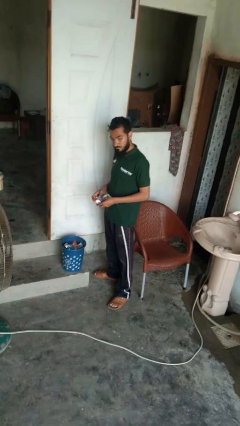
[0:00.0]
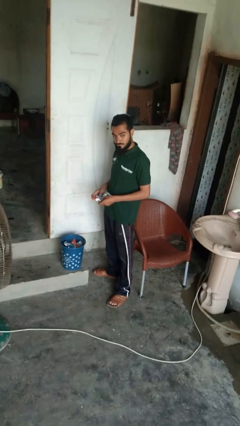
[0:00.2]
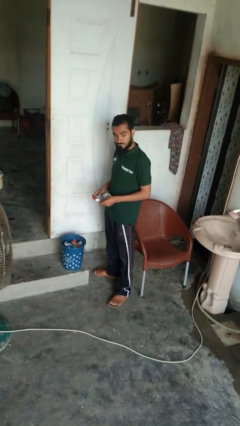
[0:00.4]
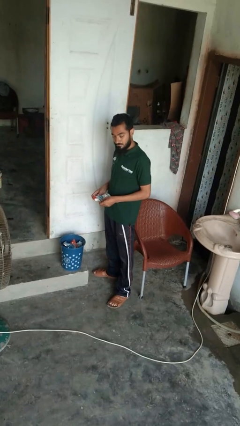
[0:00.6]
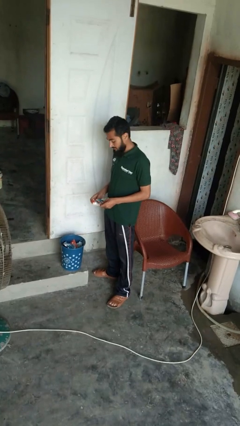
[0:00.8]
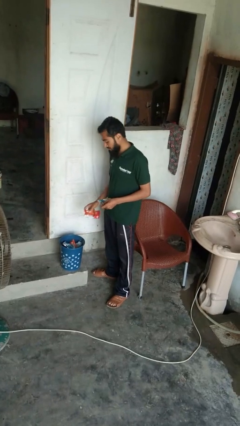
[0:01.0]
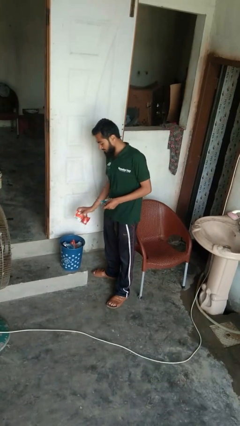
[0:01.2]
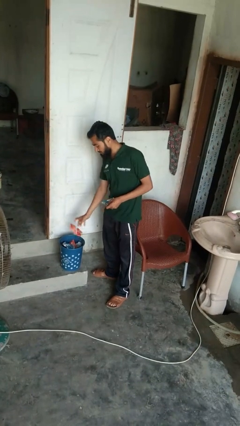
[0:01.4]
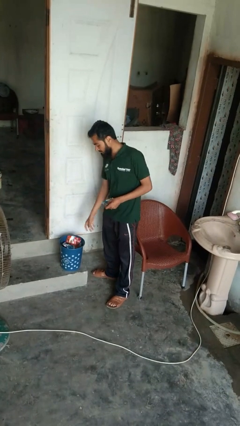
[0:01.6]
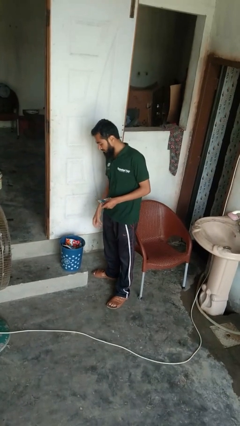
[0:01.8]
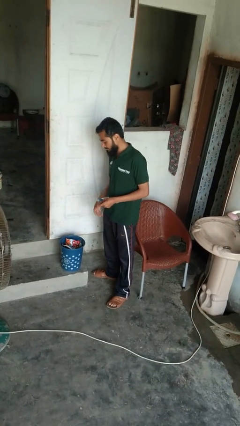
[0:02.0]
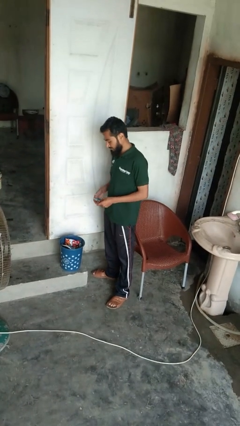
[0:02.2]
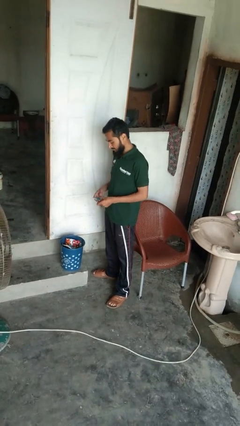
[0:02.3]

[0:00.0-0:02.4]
person discards trash

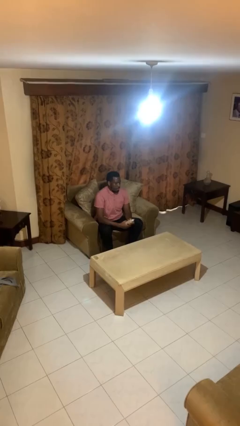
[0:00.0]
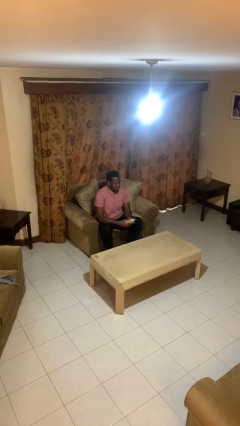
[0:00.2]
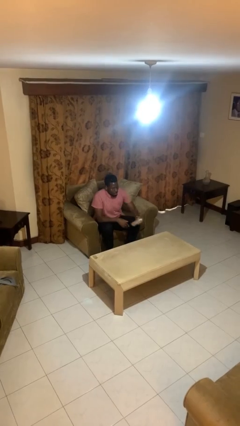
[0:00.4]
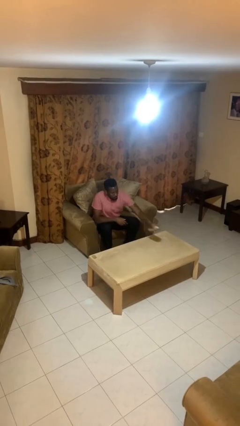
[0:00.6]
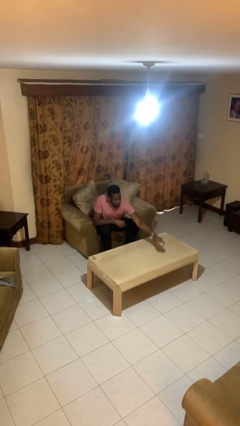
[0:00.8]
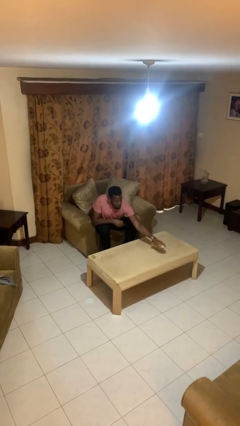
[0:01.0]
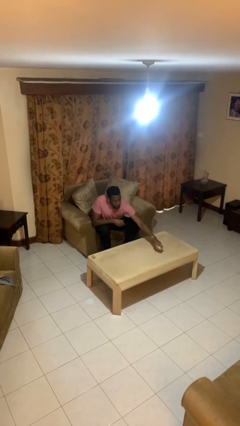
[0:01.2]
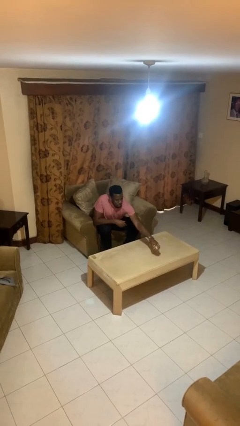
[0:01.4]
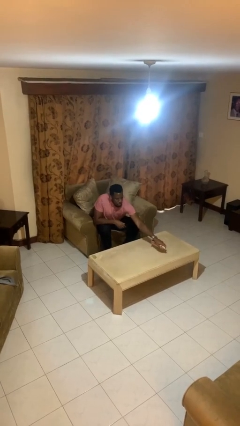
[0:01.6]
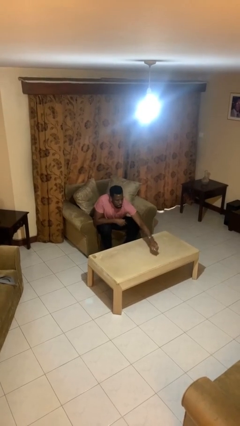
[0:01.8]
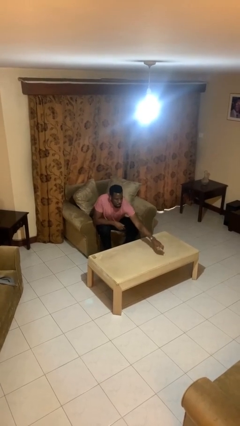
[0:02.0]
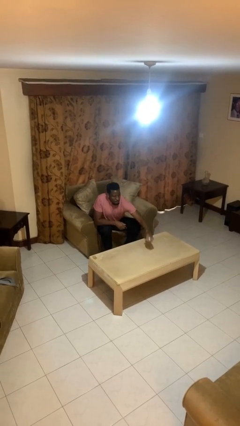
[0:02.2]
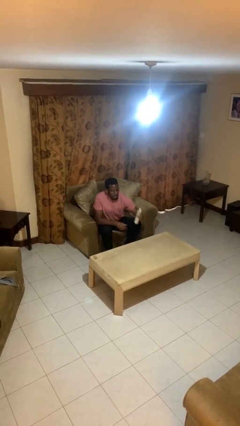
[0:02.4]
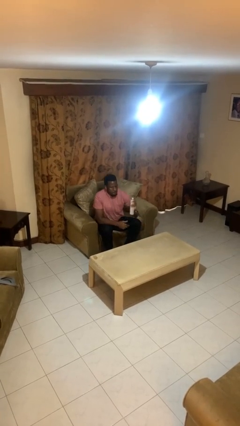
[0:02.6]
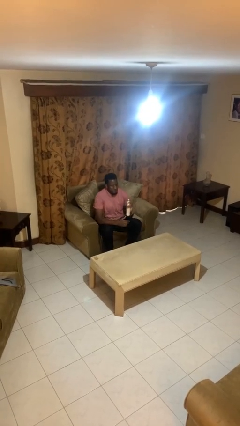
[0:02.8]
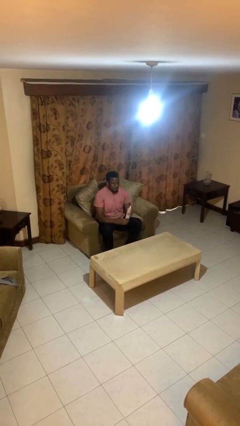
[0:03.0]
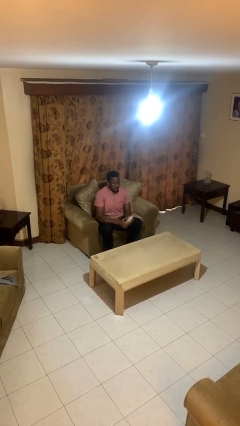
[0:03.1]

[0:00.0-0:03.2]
person sprays from bottle

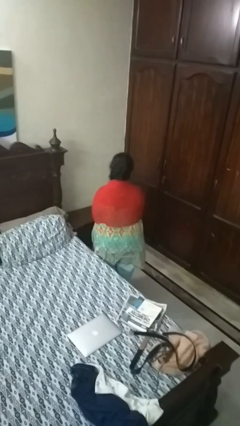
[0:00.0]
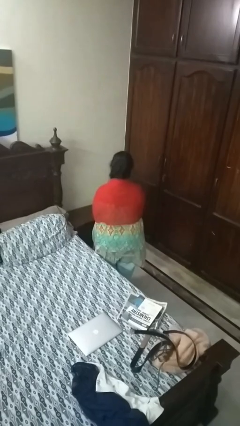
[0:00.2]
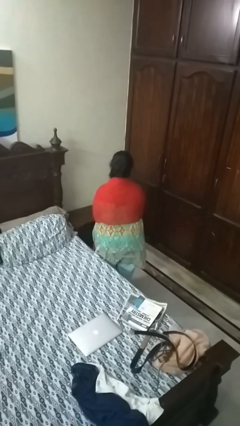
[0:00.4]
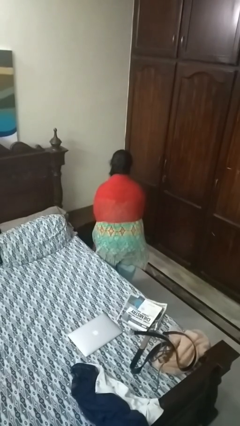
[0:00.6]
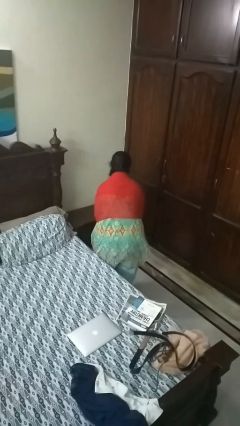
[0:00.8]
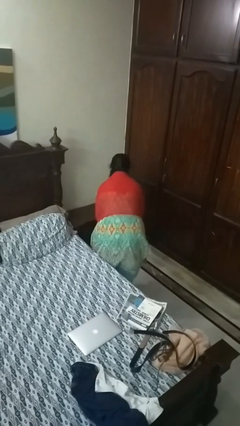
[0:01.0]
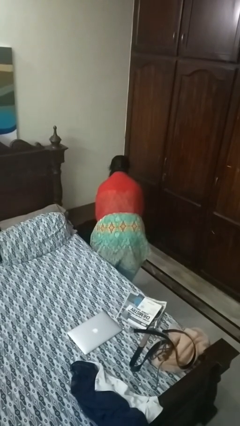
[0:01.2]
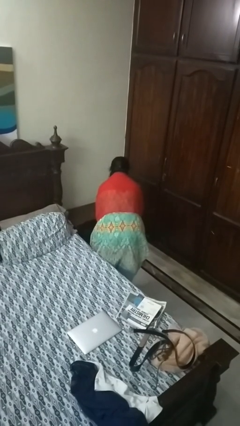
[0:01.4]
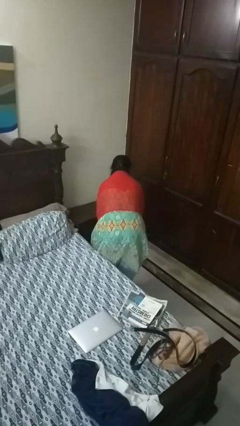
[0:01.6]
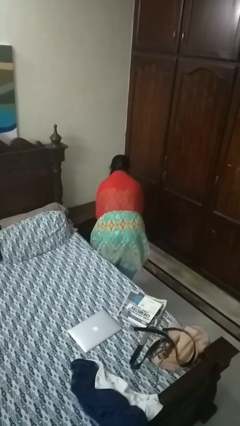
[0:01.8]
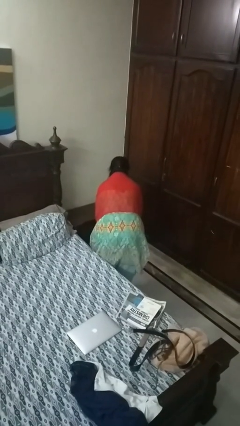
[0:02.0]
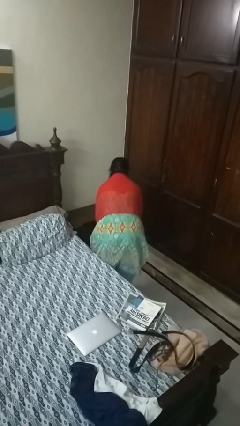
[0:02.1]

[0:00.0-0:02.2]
person bows

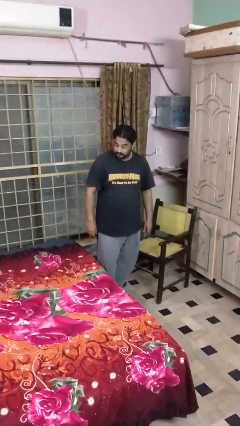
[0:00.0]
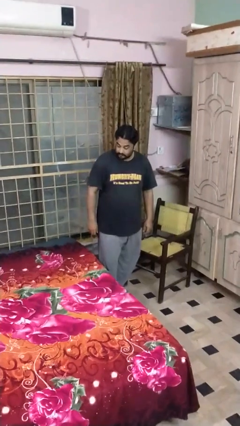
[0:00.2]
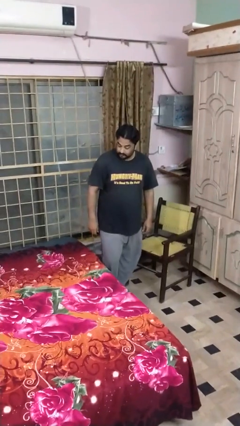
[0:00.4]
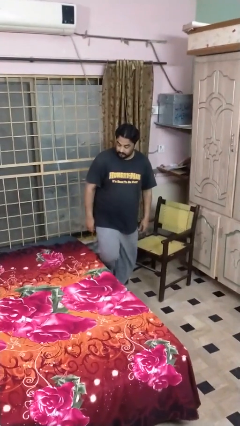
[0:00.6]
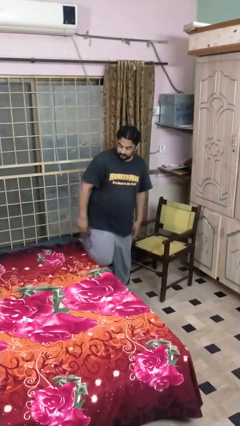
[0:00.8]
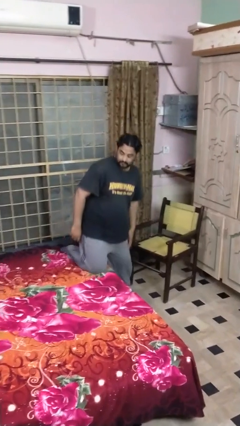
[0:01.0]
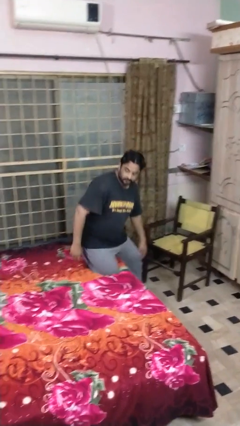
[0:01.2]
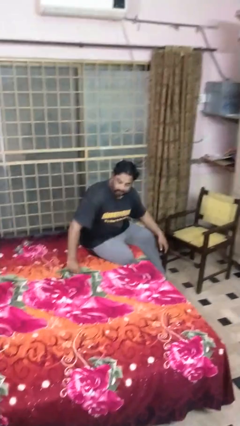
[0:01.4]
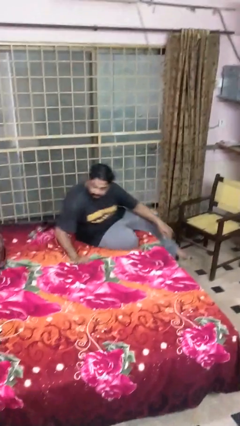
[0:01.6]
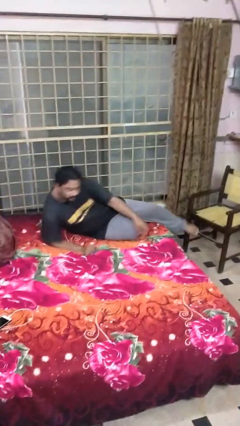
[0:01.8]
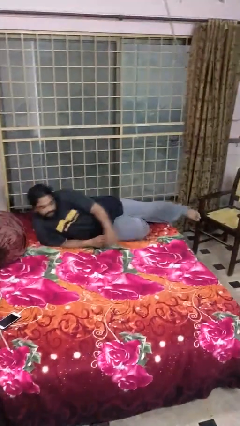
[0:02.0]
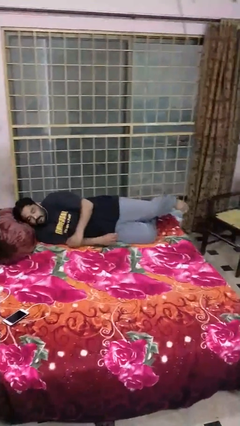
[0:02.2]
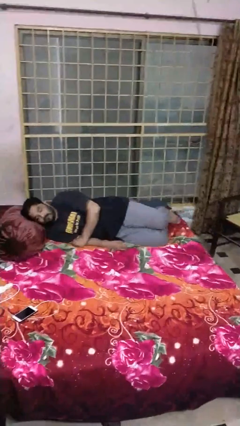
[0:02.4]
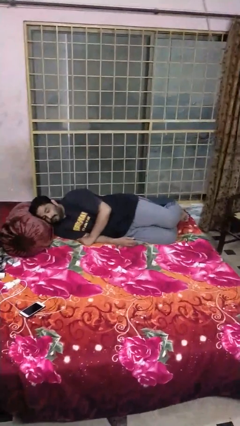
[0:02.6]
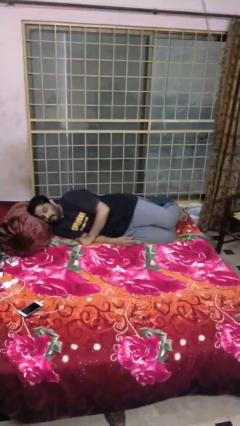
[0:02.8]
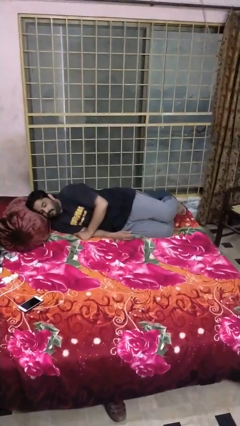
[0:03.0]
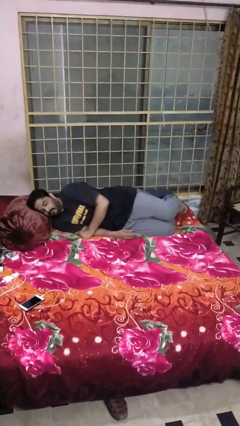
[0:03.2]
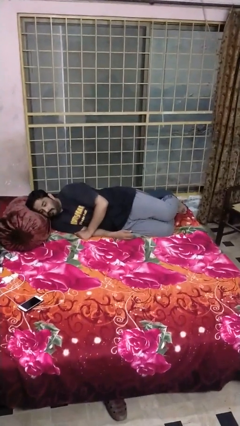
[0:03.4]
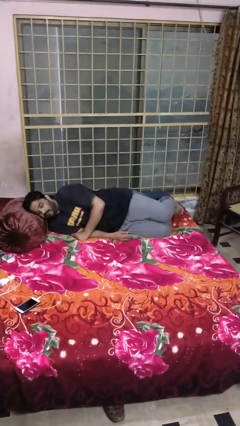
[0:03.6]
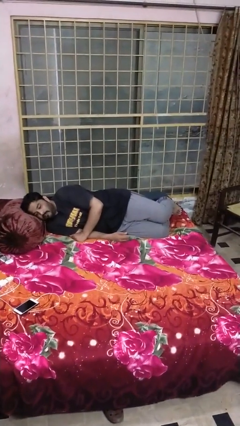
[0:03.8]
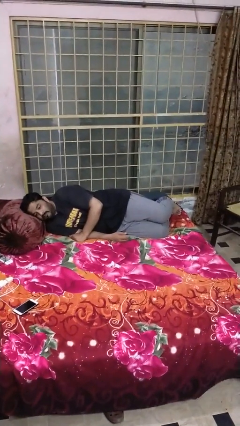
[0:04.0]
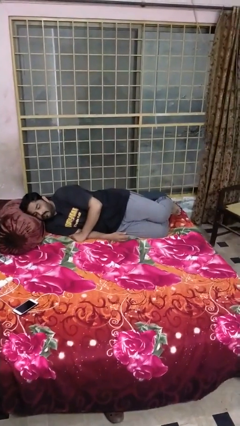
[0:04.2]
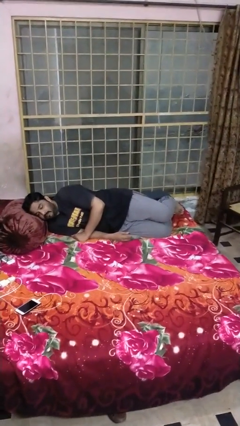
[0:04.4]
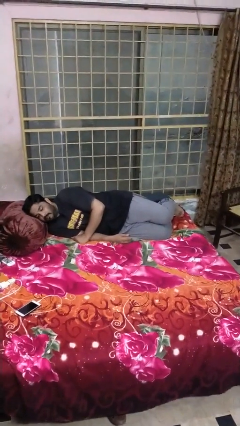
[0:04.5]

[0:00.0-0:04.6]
person lies down on bed

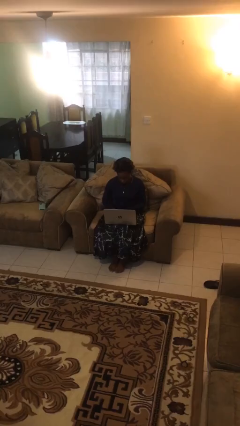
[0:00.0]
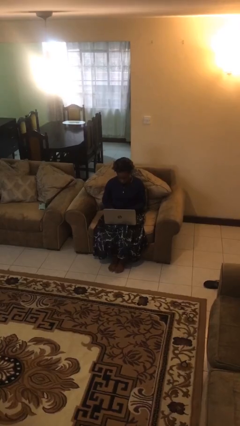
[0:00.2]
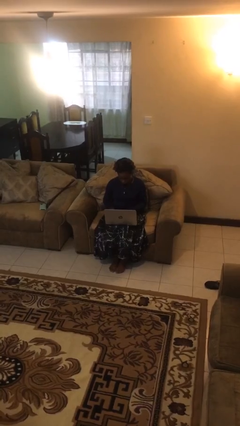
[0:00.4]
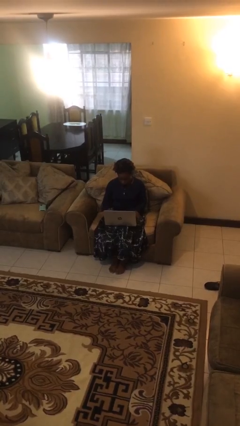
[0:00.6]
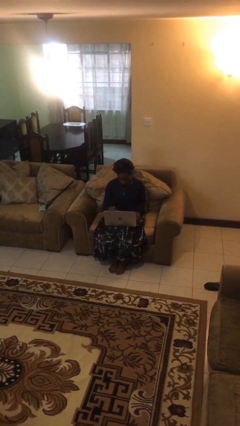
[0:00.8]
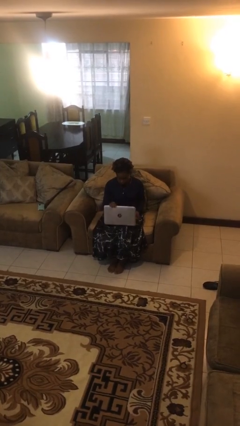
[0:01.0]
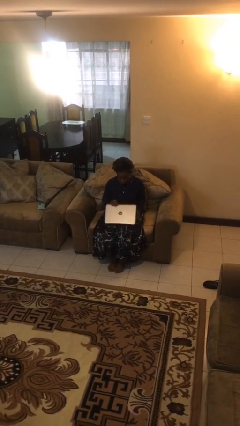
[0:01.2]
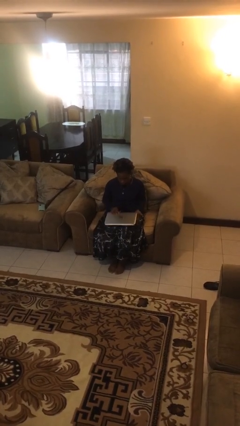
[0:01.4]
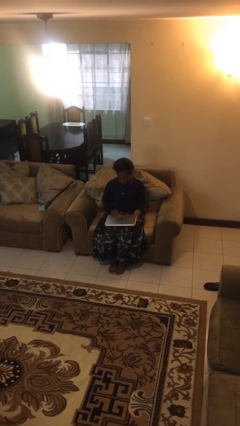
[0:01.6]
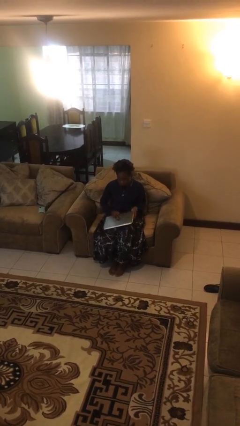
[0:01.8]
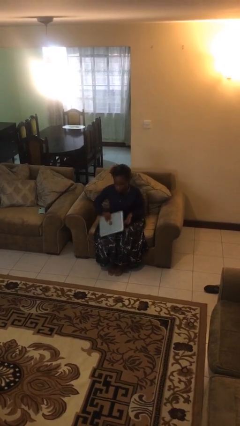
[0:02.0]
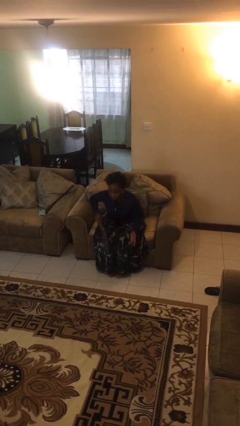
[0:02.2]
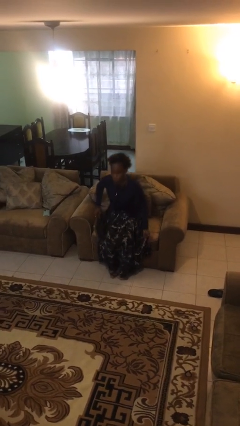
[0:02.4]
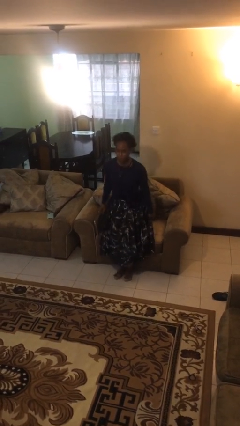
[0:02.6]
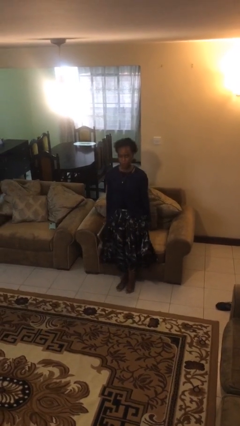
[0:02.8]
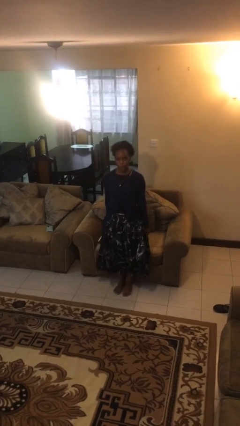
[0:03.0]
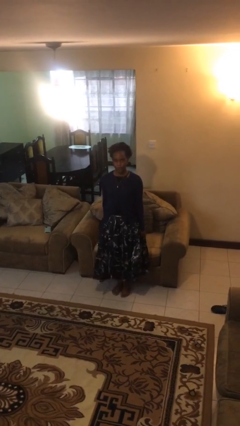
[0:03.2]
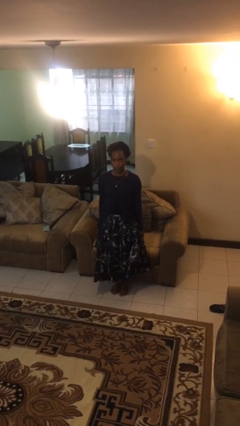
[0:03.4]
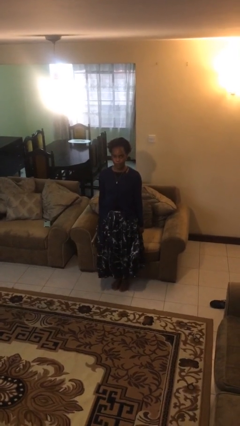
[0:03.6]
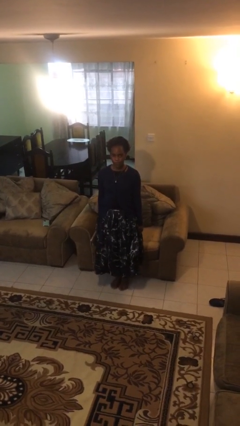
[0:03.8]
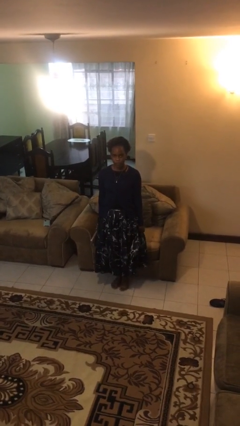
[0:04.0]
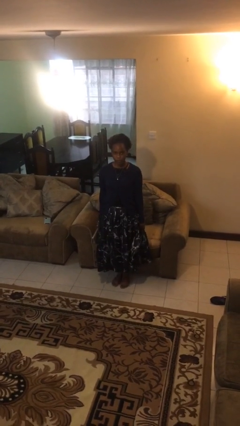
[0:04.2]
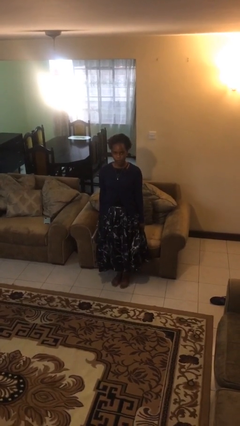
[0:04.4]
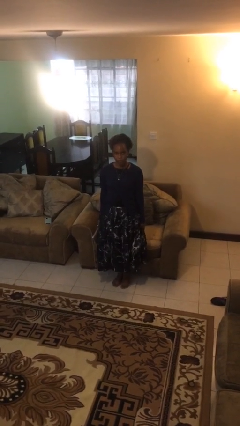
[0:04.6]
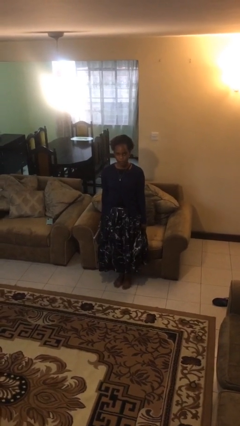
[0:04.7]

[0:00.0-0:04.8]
person stands up

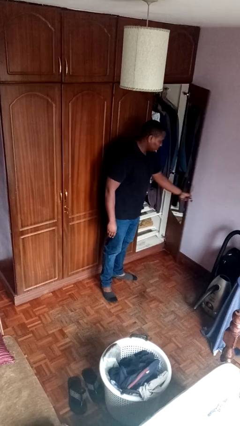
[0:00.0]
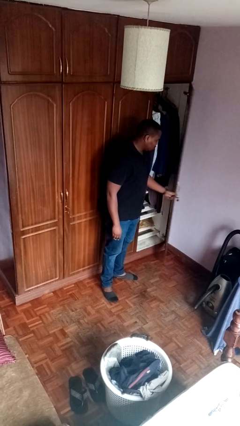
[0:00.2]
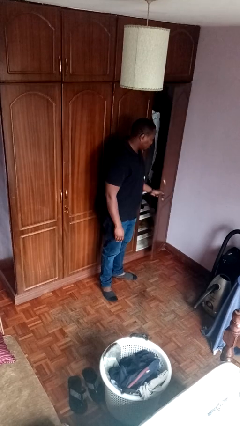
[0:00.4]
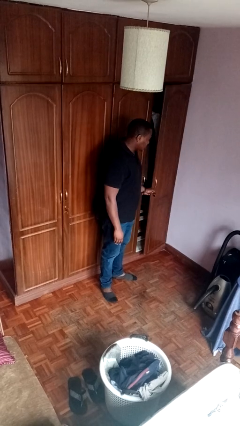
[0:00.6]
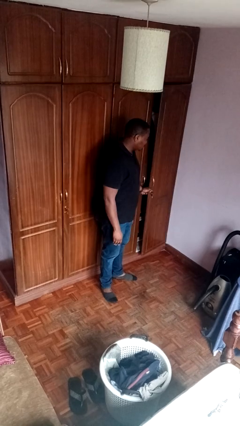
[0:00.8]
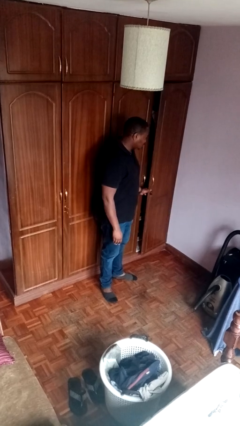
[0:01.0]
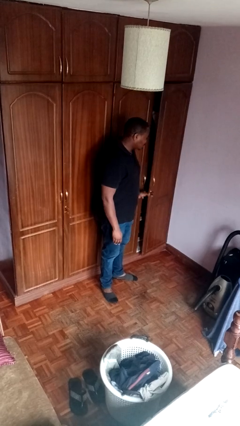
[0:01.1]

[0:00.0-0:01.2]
person closes closet door
